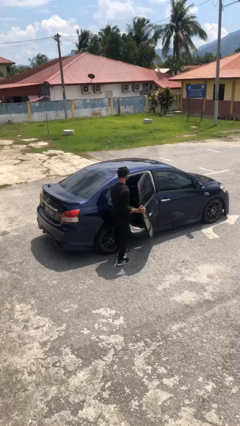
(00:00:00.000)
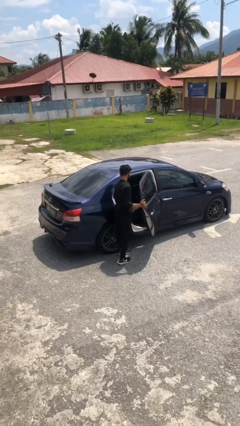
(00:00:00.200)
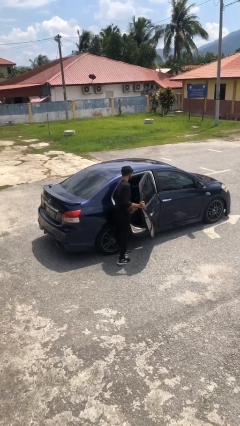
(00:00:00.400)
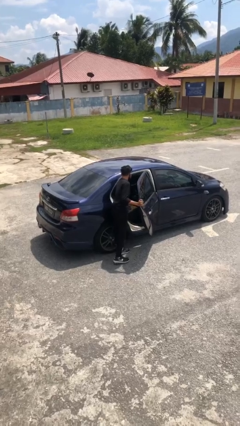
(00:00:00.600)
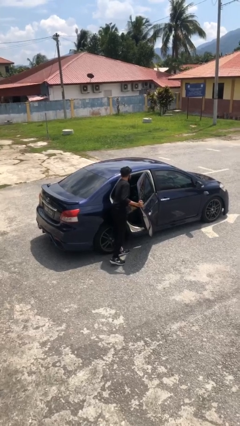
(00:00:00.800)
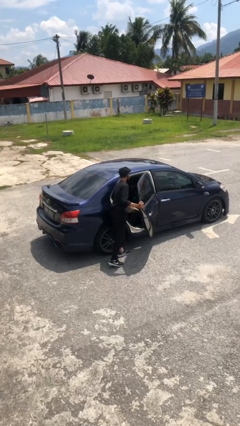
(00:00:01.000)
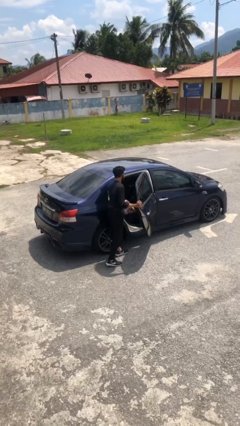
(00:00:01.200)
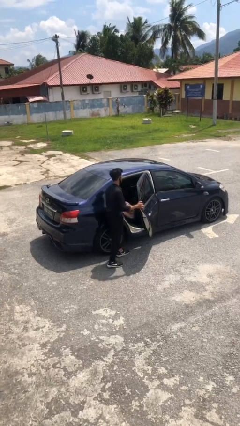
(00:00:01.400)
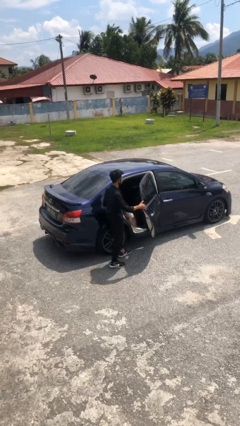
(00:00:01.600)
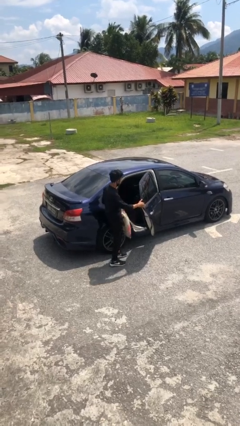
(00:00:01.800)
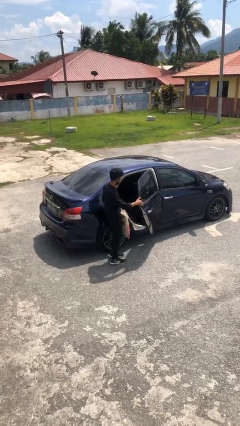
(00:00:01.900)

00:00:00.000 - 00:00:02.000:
person unloads car

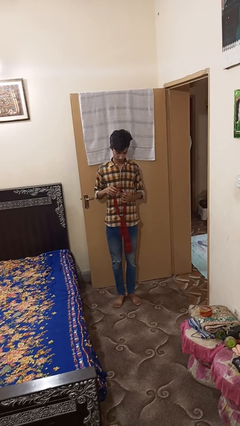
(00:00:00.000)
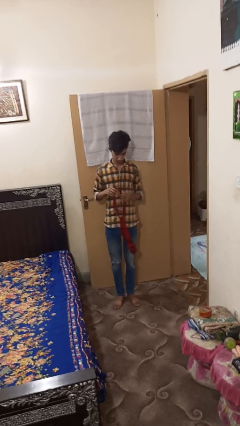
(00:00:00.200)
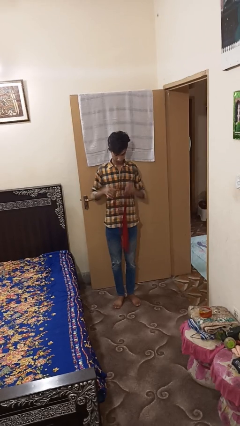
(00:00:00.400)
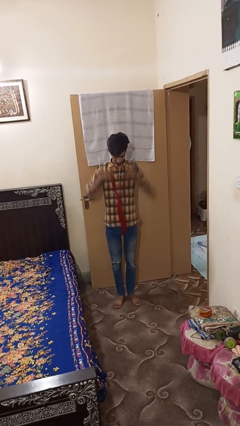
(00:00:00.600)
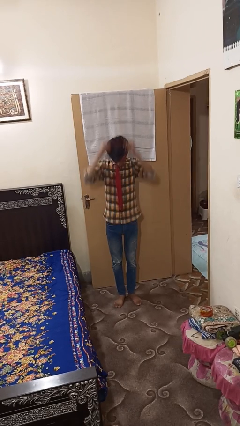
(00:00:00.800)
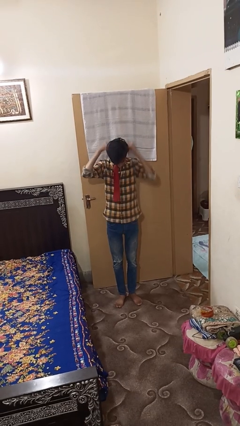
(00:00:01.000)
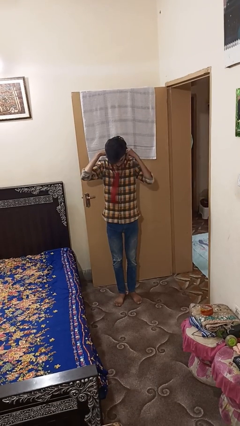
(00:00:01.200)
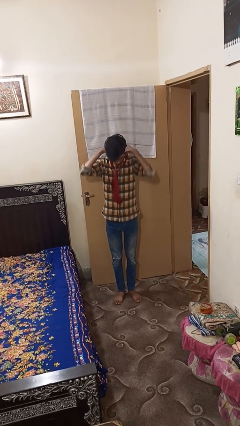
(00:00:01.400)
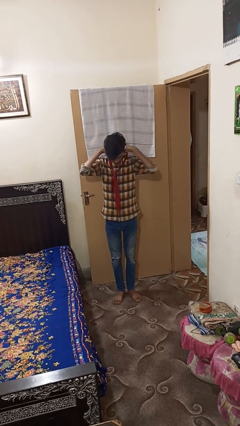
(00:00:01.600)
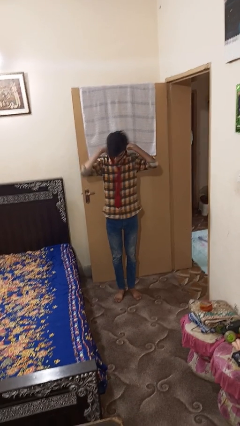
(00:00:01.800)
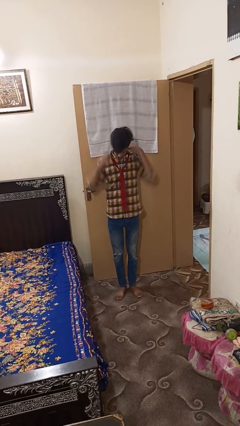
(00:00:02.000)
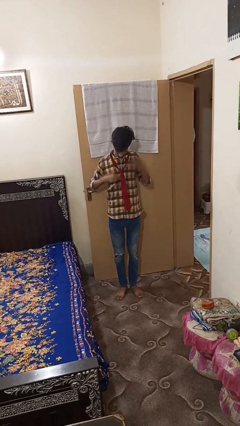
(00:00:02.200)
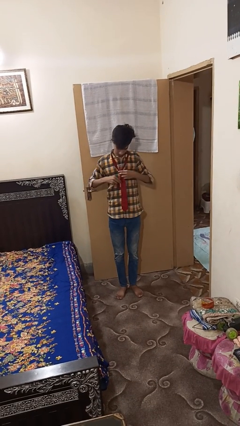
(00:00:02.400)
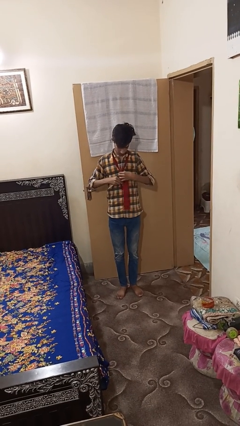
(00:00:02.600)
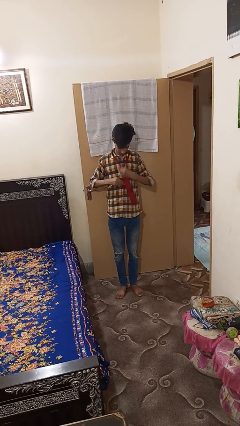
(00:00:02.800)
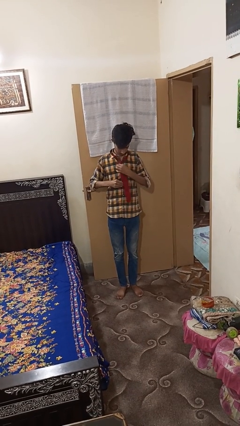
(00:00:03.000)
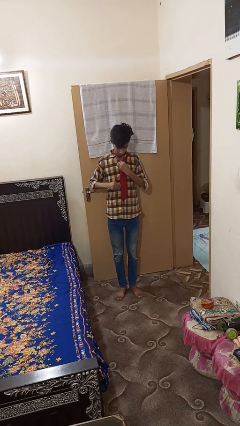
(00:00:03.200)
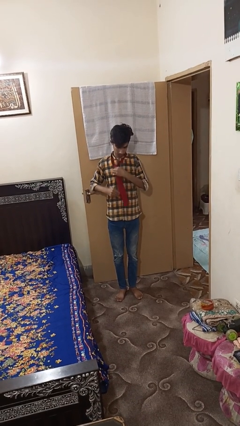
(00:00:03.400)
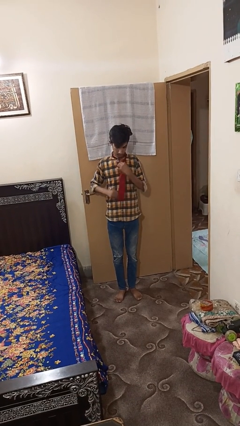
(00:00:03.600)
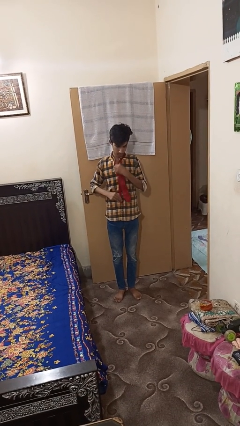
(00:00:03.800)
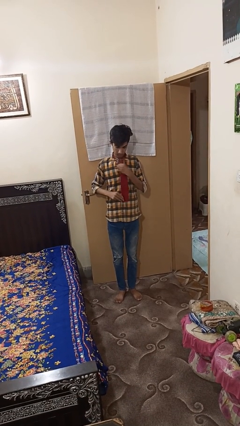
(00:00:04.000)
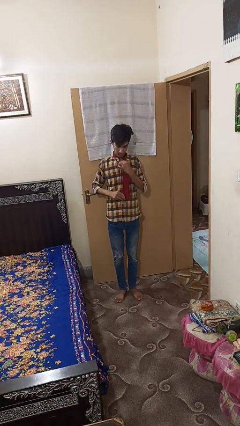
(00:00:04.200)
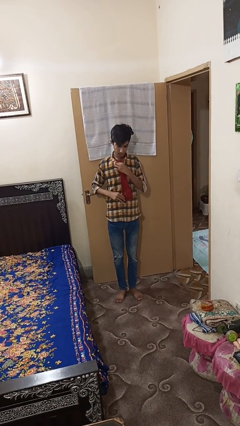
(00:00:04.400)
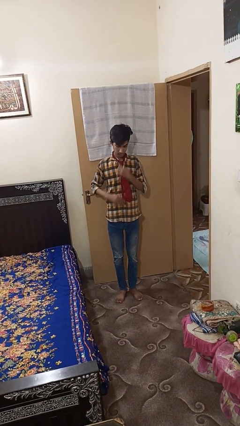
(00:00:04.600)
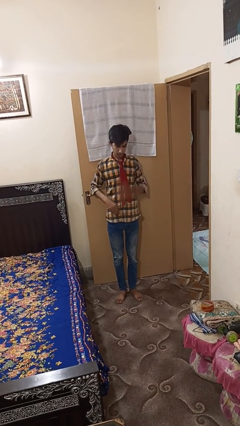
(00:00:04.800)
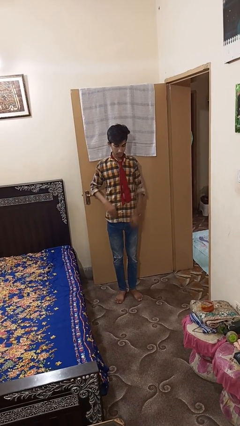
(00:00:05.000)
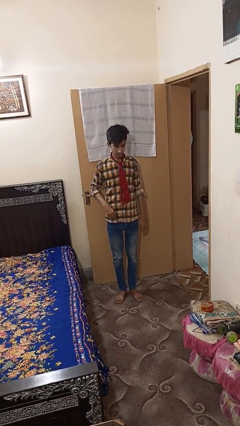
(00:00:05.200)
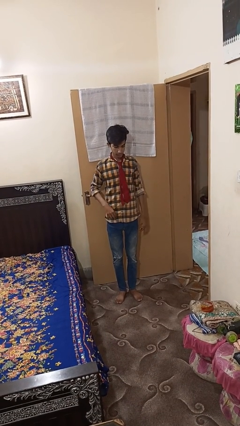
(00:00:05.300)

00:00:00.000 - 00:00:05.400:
person puts on necktie

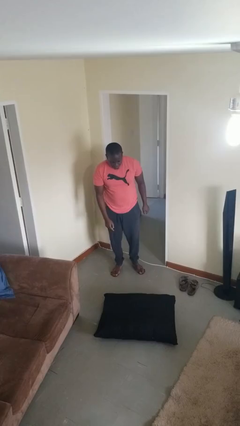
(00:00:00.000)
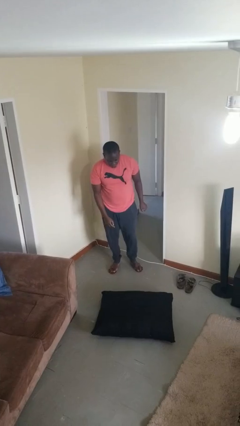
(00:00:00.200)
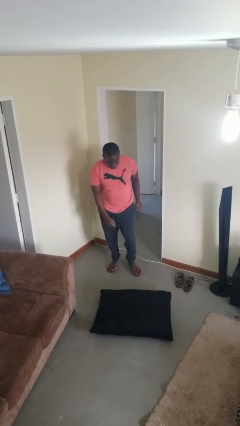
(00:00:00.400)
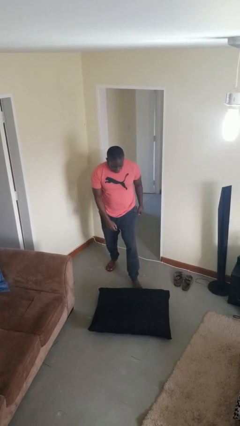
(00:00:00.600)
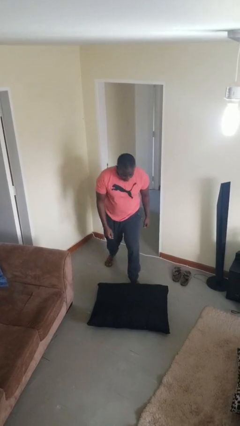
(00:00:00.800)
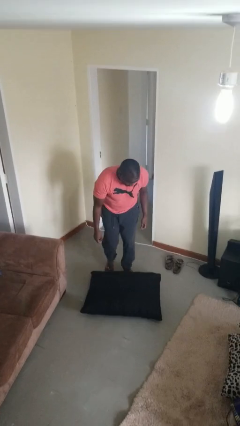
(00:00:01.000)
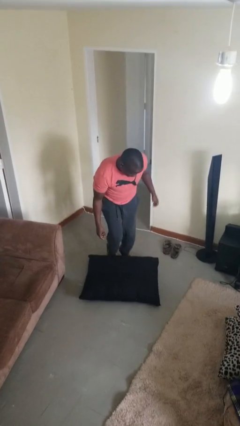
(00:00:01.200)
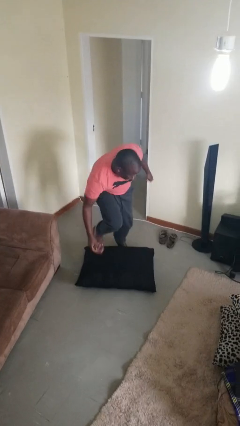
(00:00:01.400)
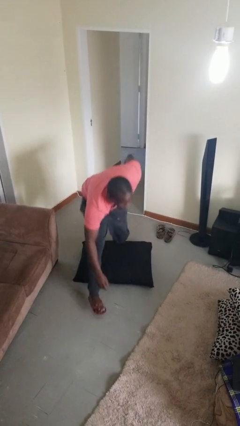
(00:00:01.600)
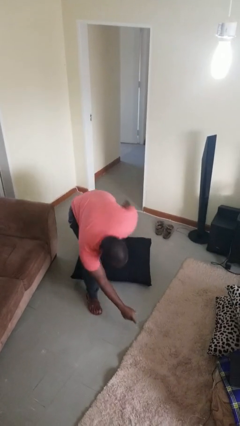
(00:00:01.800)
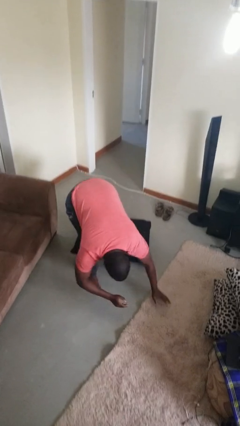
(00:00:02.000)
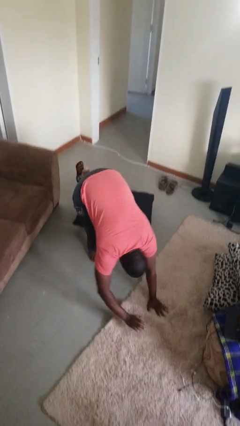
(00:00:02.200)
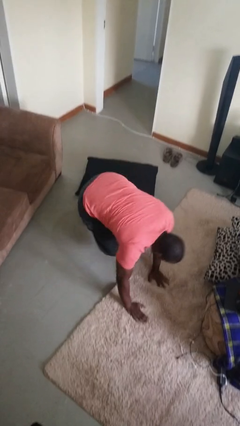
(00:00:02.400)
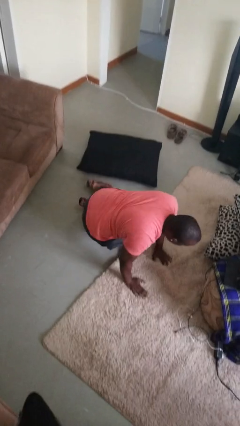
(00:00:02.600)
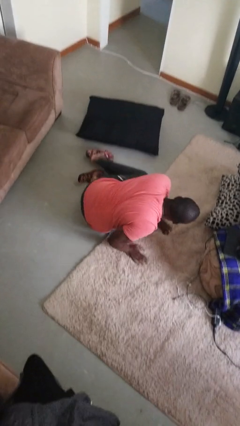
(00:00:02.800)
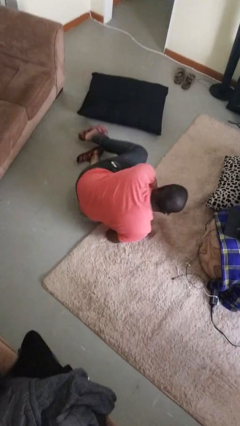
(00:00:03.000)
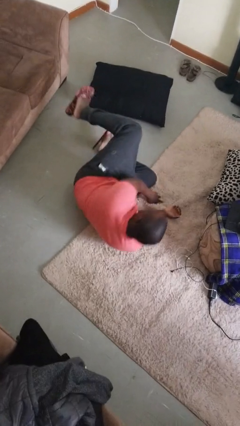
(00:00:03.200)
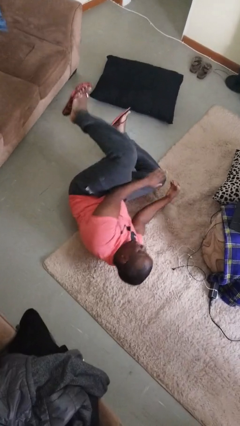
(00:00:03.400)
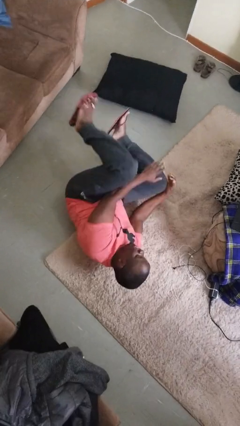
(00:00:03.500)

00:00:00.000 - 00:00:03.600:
person trips on object on floor

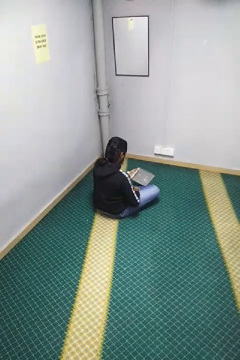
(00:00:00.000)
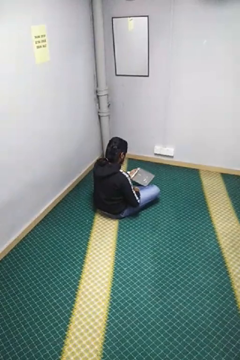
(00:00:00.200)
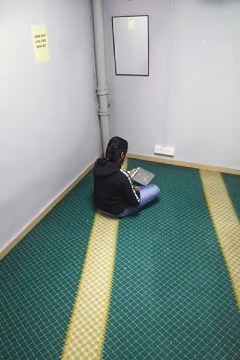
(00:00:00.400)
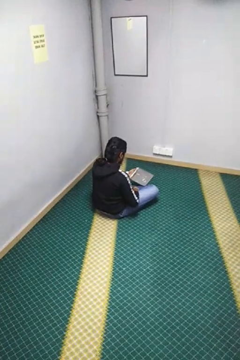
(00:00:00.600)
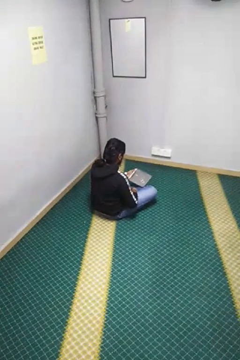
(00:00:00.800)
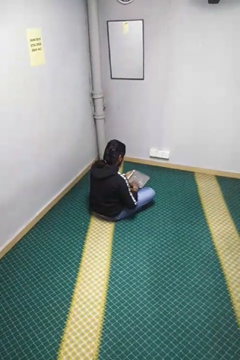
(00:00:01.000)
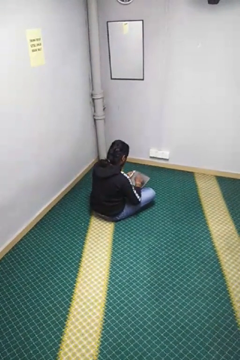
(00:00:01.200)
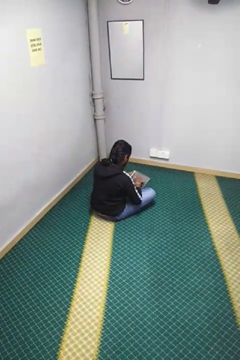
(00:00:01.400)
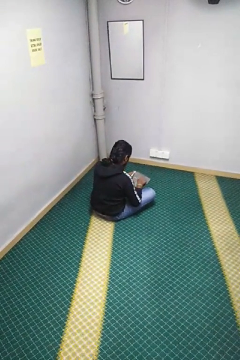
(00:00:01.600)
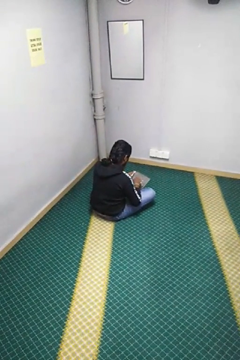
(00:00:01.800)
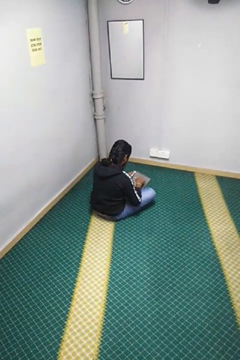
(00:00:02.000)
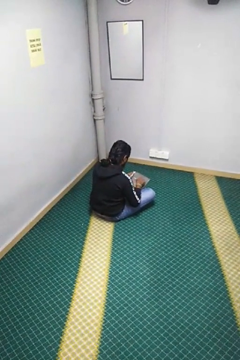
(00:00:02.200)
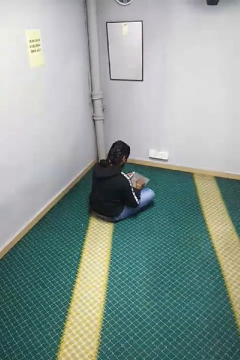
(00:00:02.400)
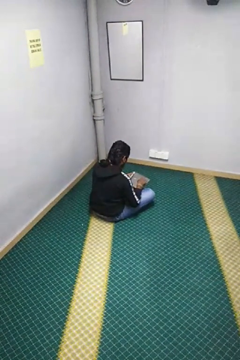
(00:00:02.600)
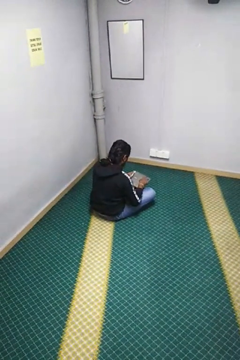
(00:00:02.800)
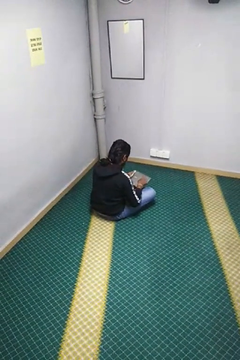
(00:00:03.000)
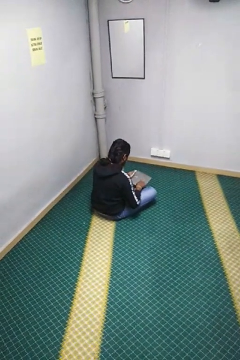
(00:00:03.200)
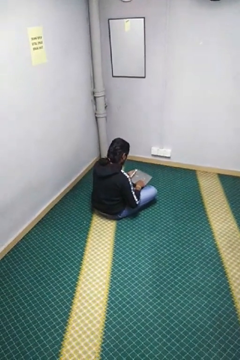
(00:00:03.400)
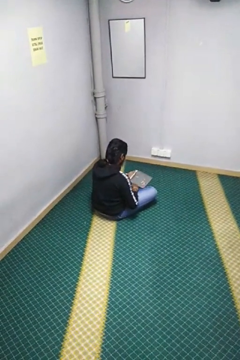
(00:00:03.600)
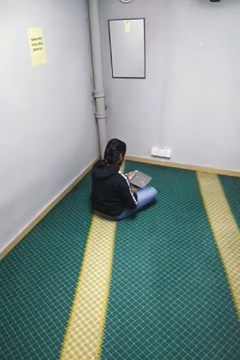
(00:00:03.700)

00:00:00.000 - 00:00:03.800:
person interacts with tablet

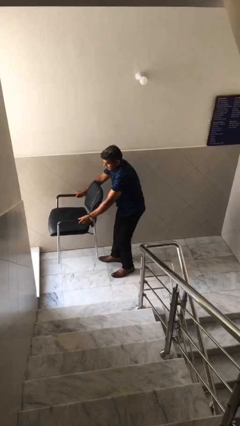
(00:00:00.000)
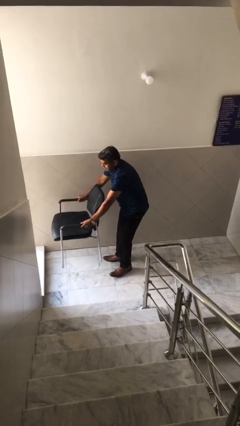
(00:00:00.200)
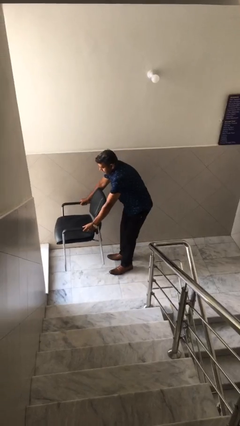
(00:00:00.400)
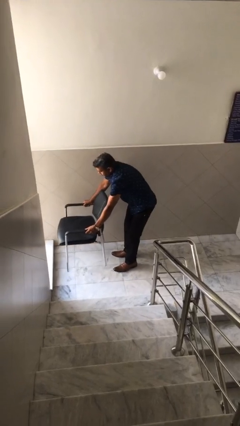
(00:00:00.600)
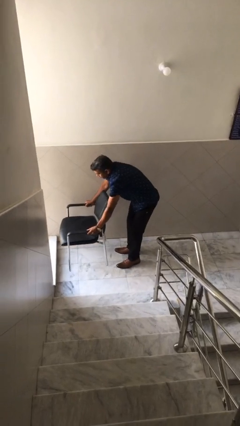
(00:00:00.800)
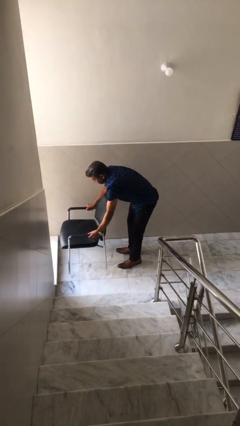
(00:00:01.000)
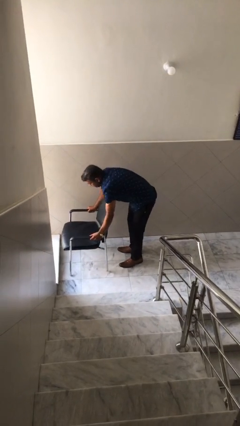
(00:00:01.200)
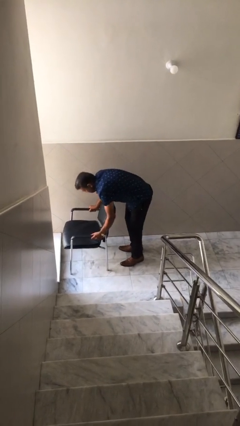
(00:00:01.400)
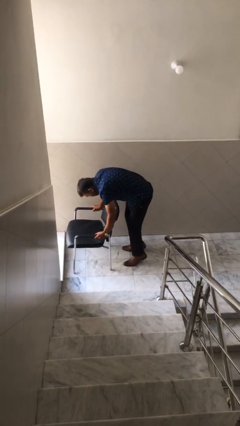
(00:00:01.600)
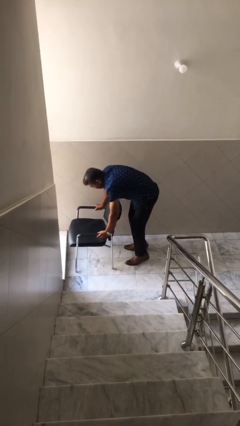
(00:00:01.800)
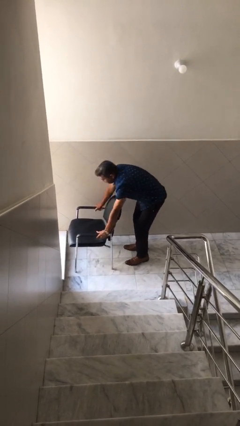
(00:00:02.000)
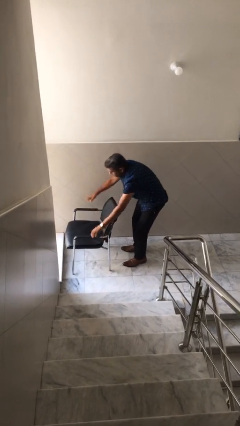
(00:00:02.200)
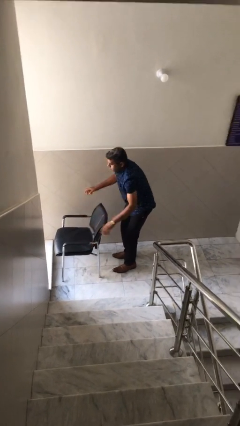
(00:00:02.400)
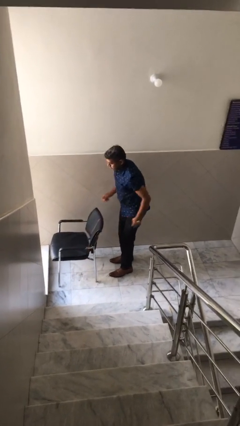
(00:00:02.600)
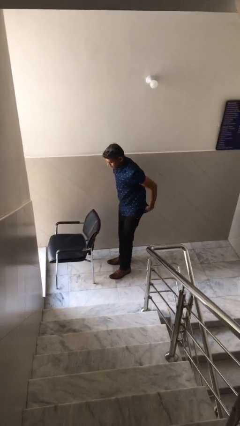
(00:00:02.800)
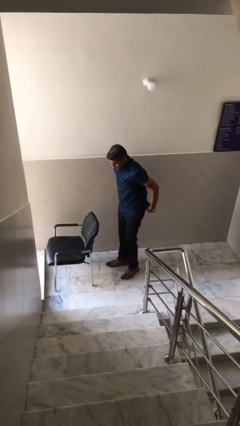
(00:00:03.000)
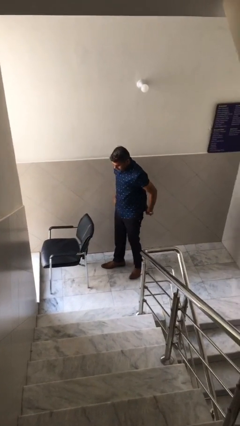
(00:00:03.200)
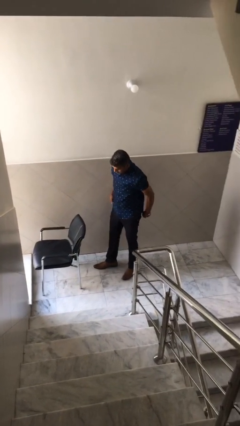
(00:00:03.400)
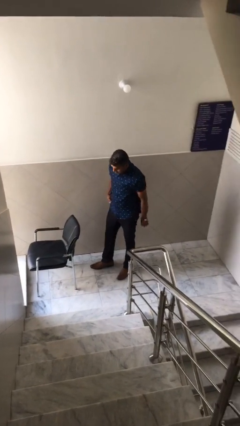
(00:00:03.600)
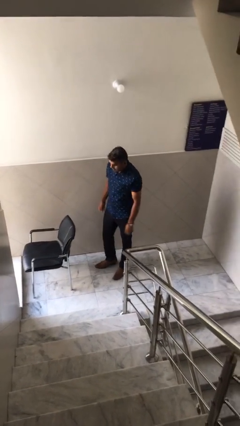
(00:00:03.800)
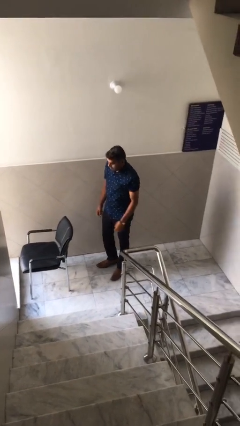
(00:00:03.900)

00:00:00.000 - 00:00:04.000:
person puts down object on floor
